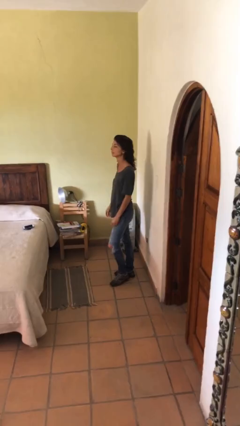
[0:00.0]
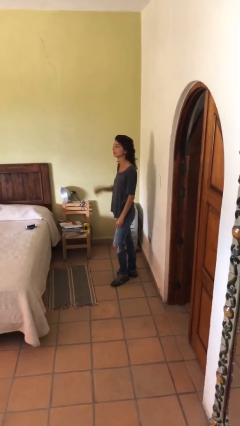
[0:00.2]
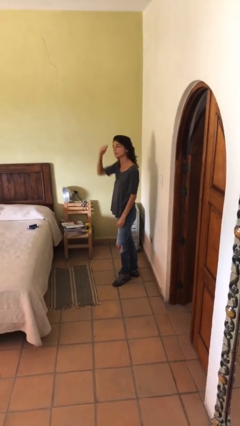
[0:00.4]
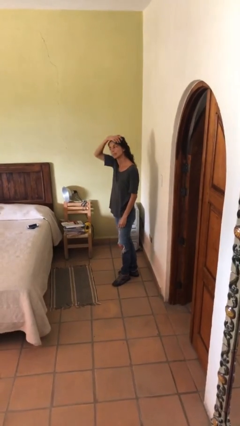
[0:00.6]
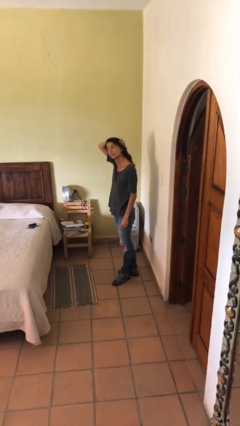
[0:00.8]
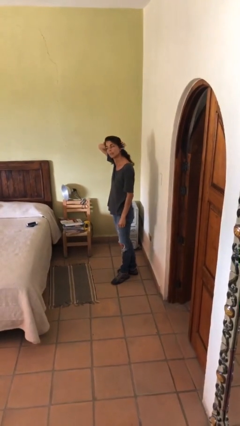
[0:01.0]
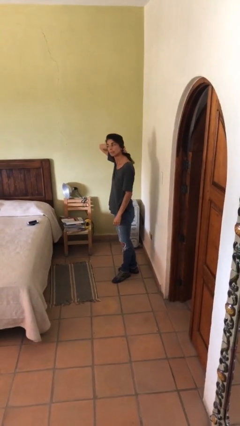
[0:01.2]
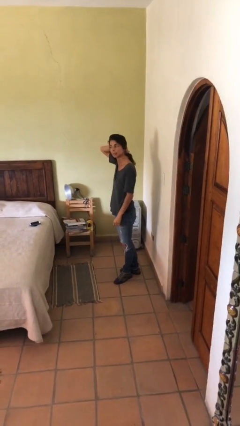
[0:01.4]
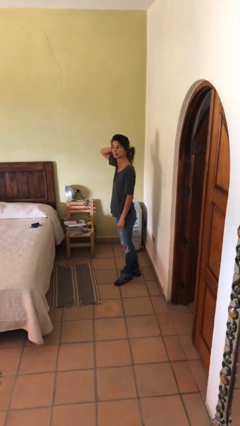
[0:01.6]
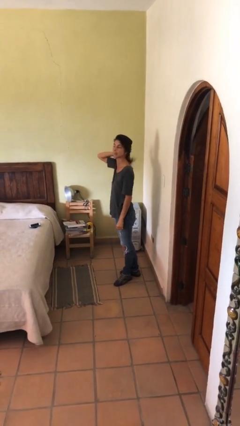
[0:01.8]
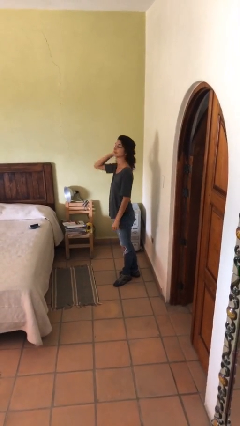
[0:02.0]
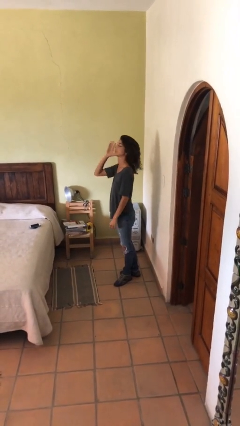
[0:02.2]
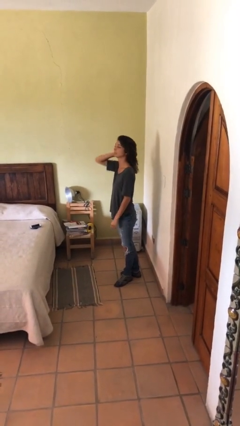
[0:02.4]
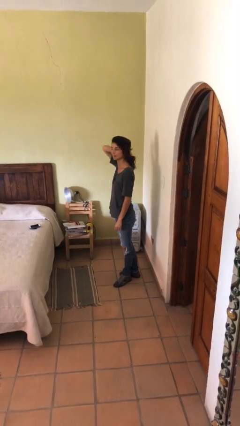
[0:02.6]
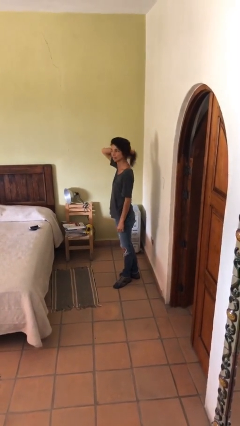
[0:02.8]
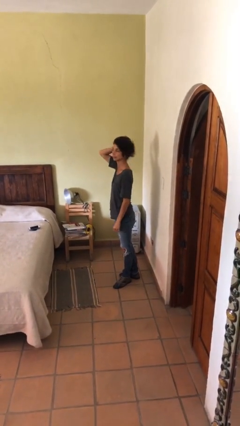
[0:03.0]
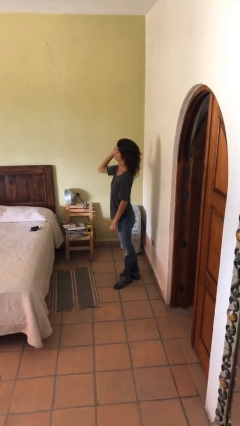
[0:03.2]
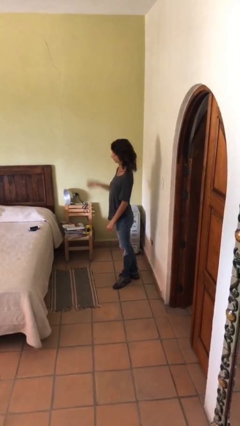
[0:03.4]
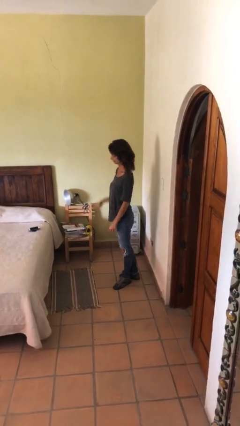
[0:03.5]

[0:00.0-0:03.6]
person strokes hair

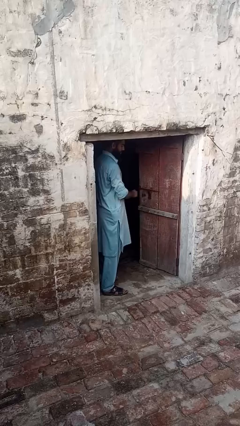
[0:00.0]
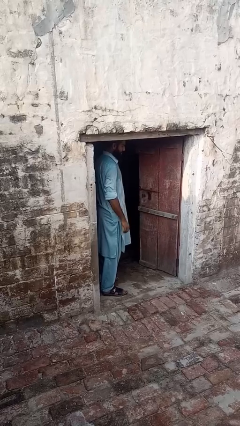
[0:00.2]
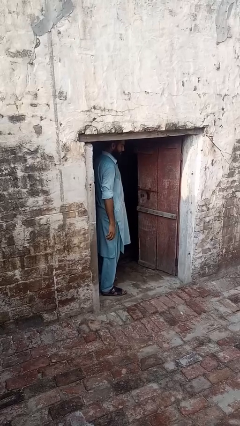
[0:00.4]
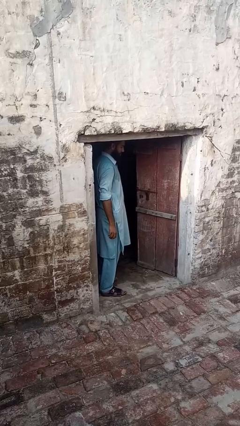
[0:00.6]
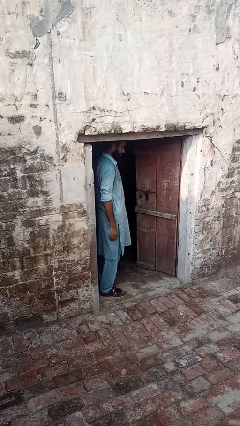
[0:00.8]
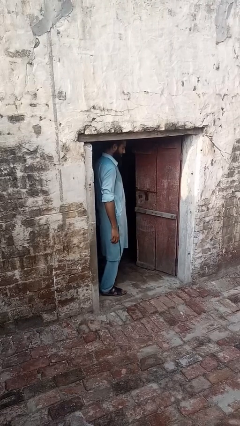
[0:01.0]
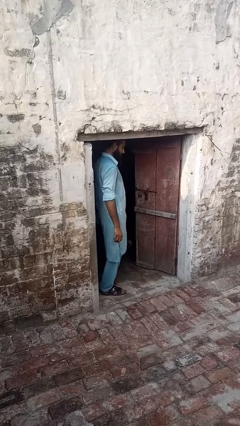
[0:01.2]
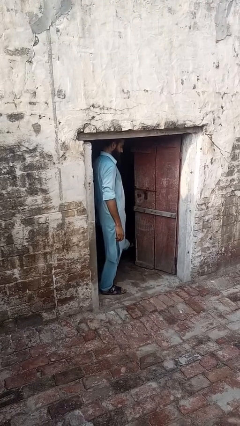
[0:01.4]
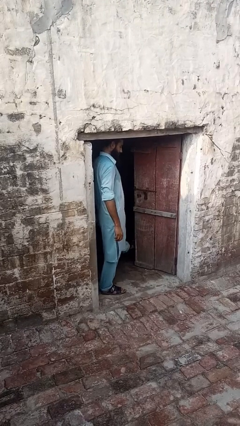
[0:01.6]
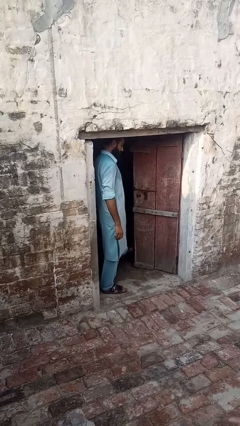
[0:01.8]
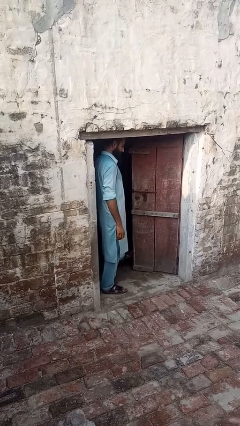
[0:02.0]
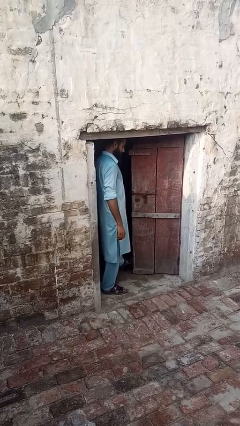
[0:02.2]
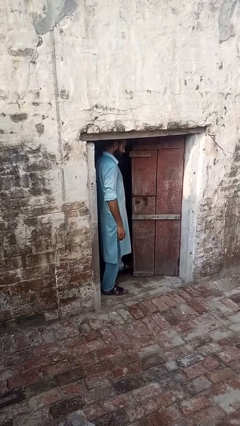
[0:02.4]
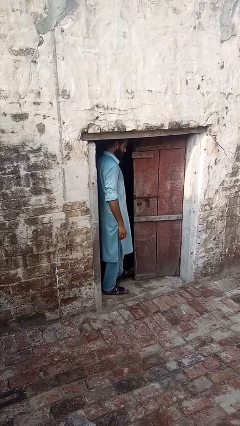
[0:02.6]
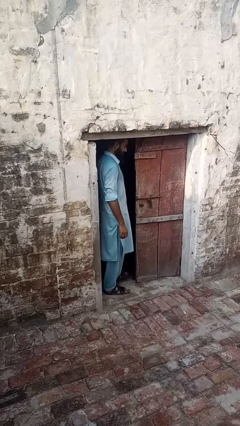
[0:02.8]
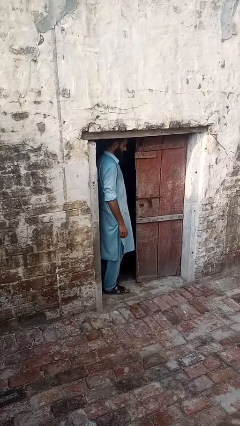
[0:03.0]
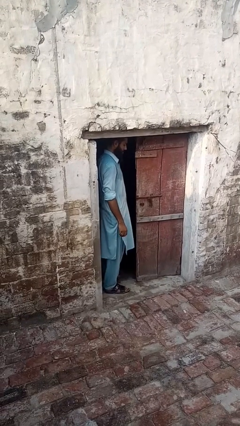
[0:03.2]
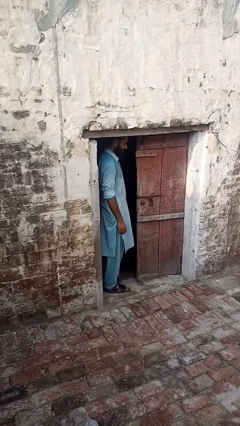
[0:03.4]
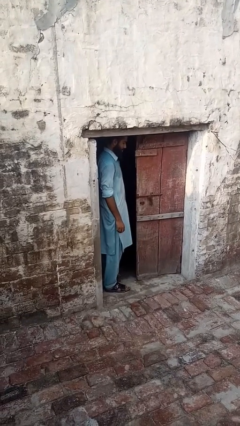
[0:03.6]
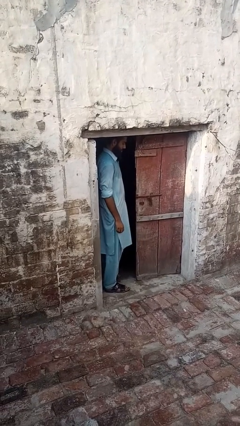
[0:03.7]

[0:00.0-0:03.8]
person closes door with foot

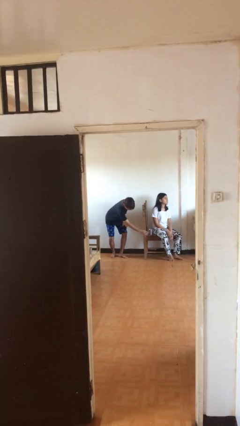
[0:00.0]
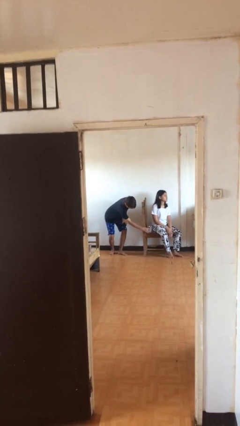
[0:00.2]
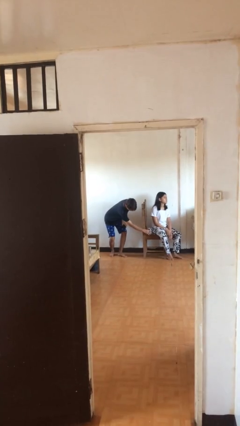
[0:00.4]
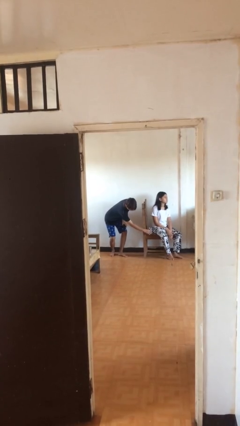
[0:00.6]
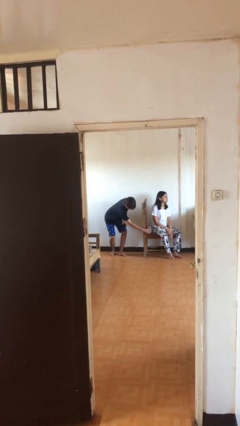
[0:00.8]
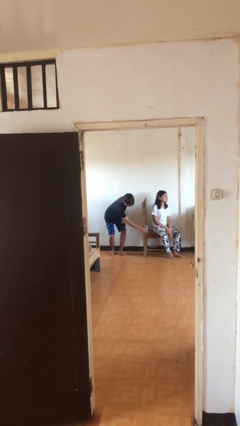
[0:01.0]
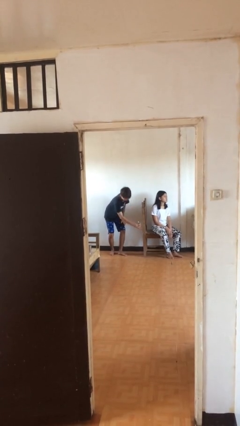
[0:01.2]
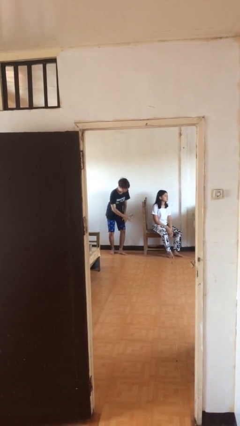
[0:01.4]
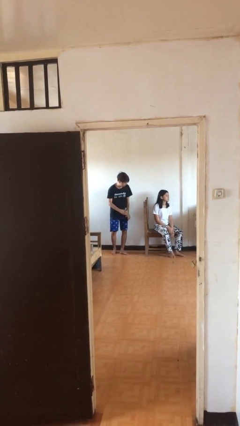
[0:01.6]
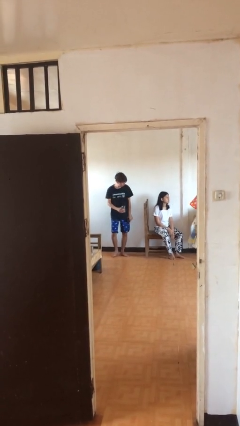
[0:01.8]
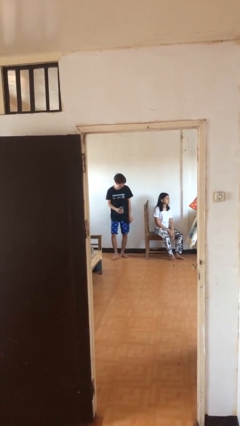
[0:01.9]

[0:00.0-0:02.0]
person steals object from person

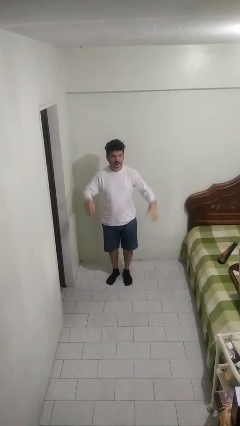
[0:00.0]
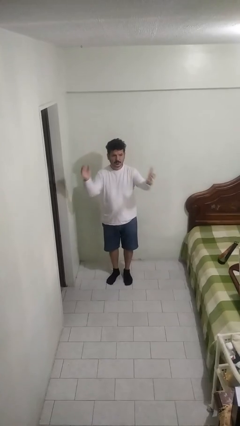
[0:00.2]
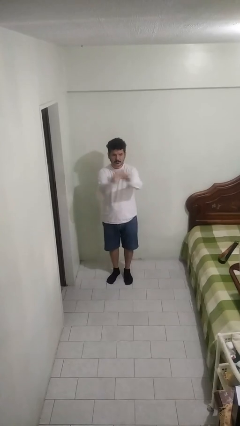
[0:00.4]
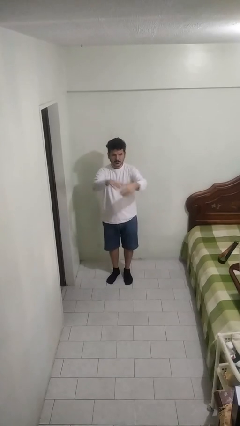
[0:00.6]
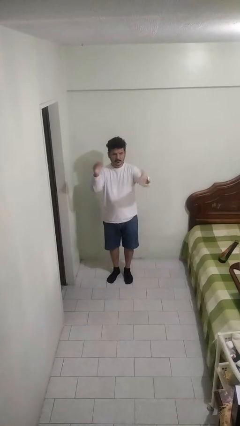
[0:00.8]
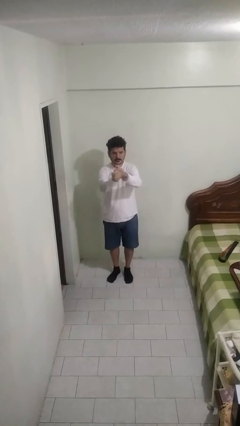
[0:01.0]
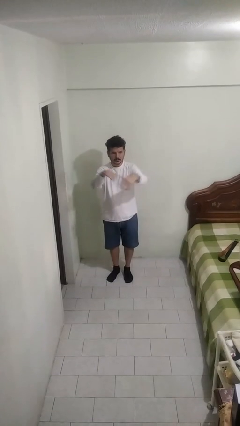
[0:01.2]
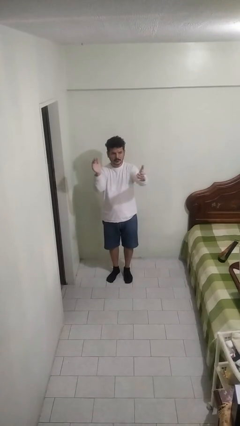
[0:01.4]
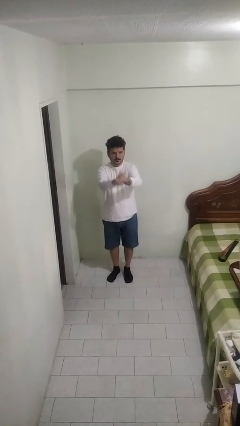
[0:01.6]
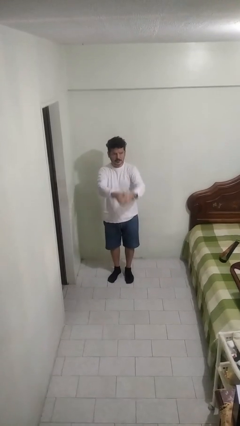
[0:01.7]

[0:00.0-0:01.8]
person claps hands

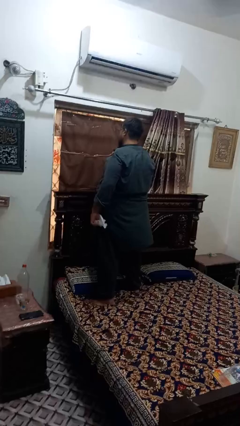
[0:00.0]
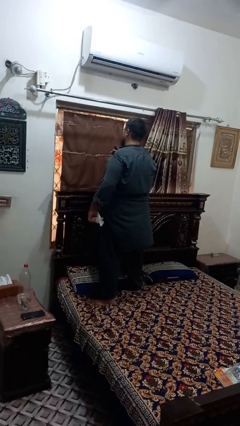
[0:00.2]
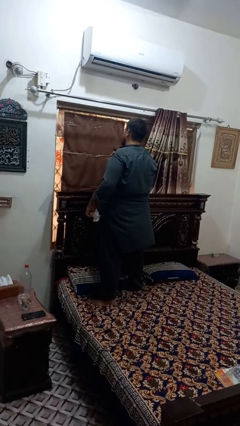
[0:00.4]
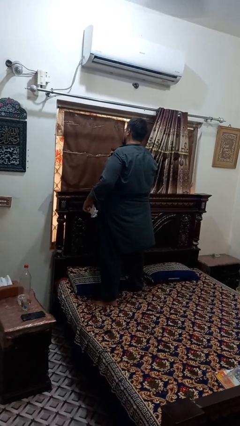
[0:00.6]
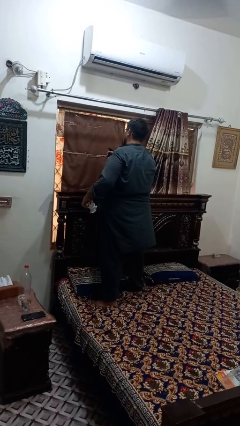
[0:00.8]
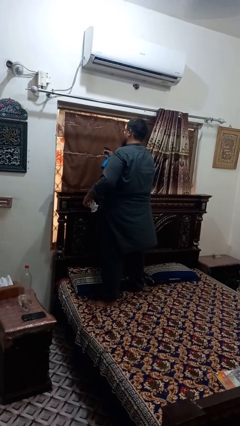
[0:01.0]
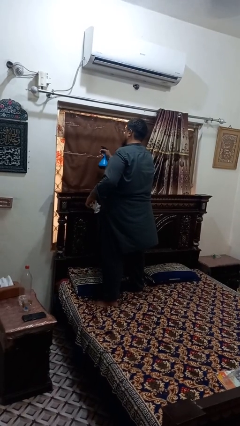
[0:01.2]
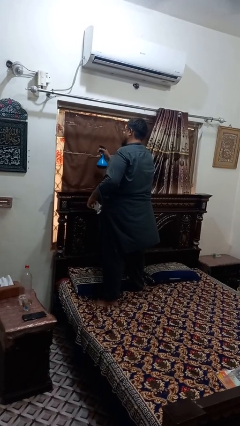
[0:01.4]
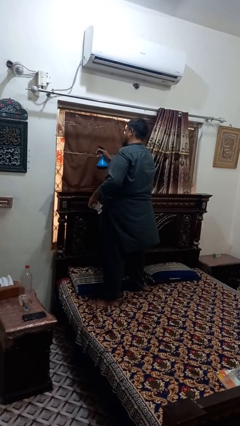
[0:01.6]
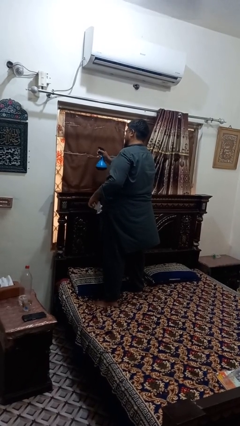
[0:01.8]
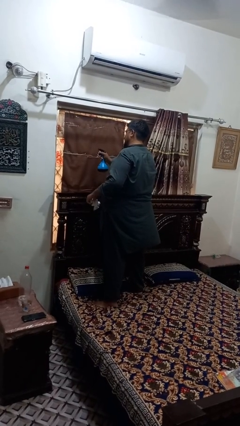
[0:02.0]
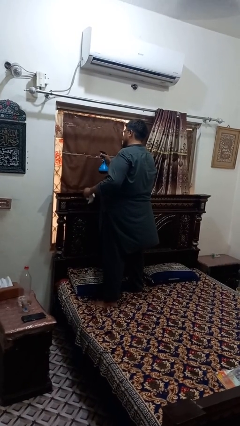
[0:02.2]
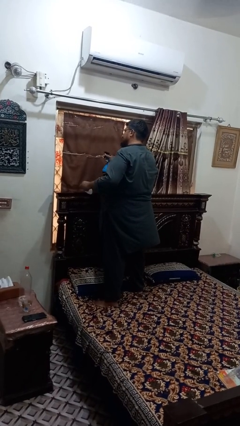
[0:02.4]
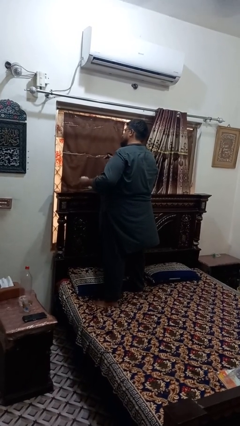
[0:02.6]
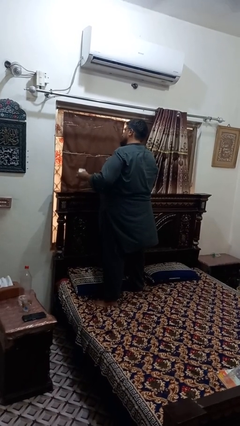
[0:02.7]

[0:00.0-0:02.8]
person sprays from bottle

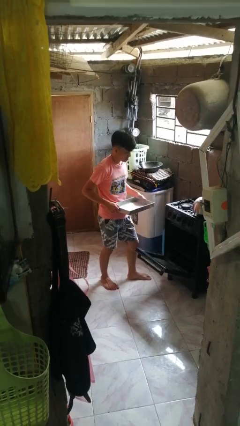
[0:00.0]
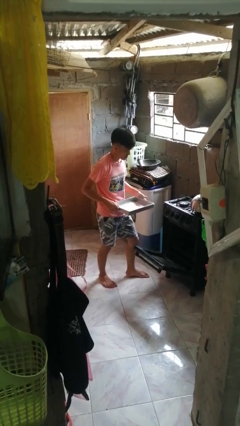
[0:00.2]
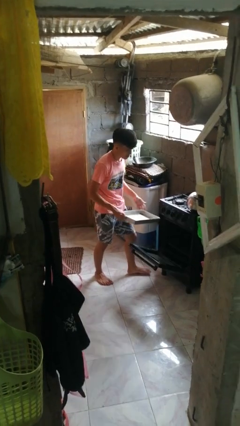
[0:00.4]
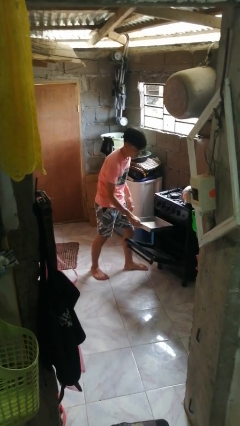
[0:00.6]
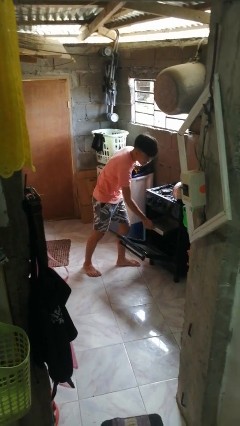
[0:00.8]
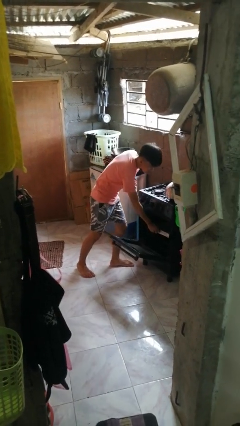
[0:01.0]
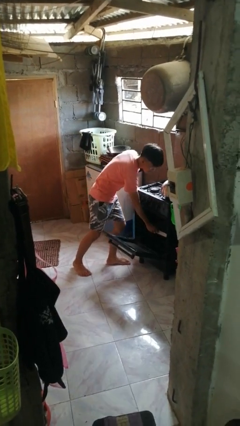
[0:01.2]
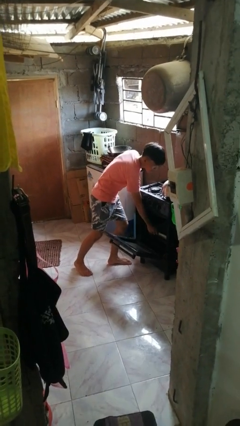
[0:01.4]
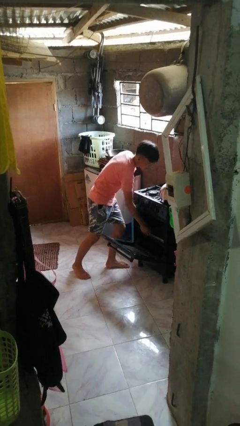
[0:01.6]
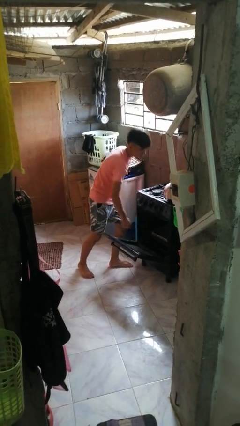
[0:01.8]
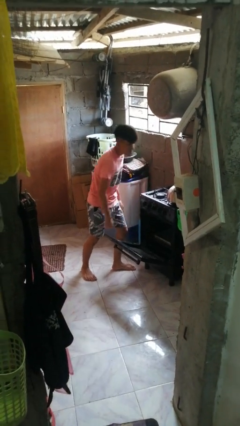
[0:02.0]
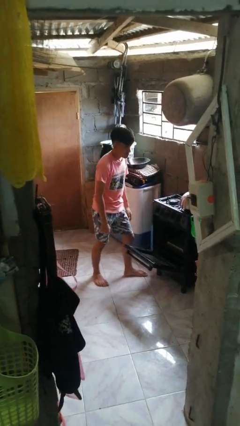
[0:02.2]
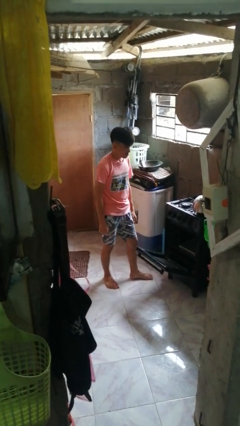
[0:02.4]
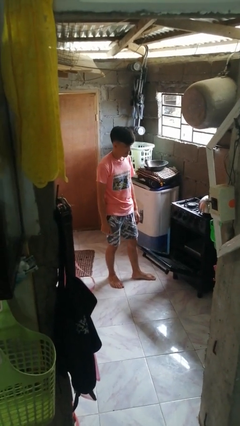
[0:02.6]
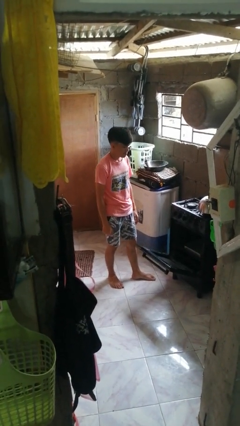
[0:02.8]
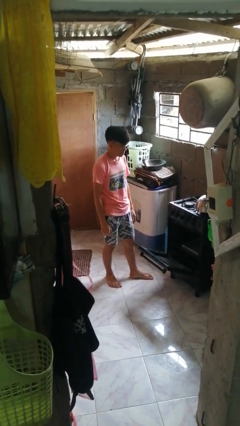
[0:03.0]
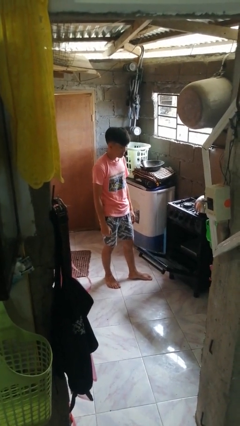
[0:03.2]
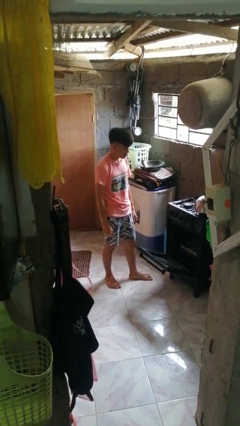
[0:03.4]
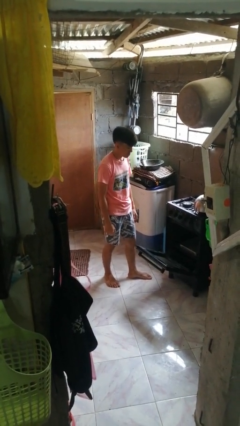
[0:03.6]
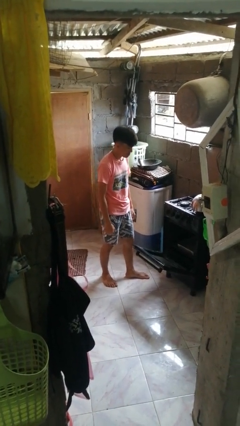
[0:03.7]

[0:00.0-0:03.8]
person puts object into oven
